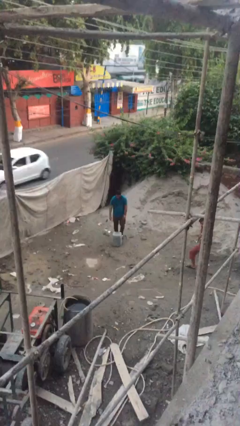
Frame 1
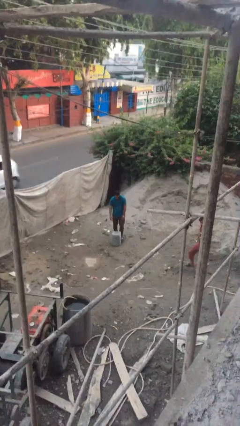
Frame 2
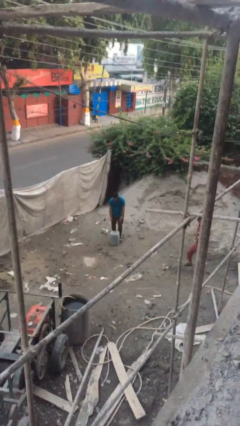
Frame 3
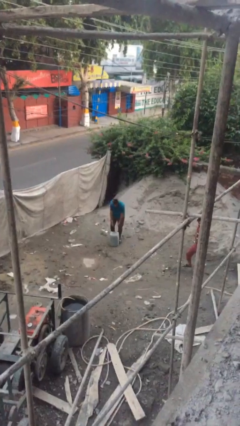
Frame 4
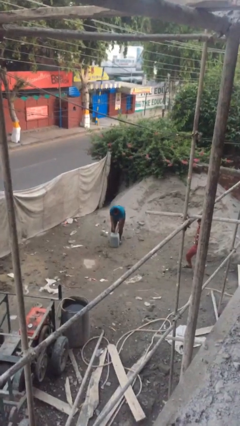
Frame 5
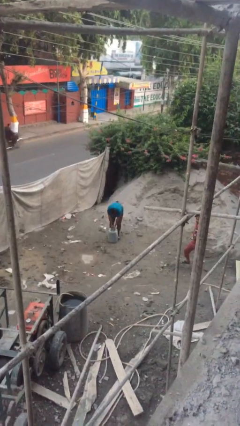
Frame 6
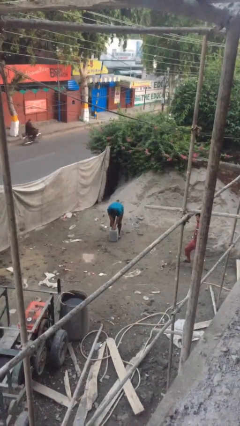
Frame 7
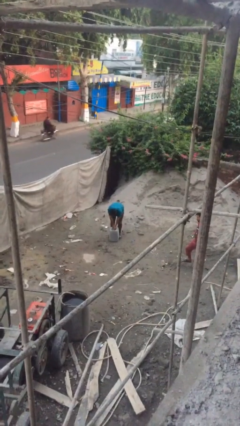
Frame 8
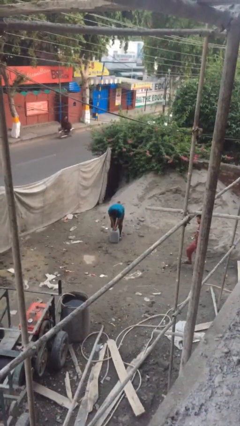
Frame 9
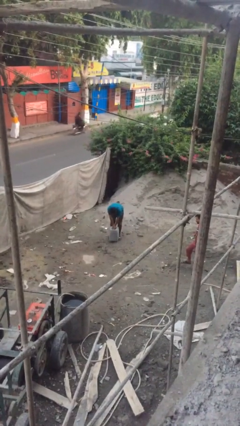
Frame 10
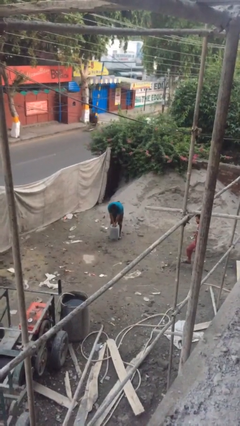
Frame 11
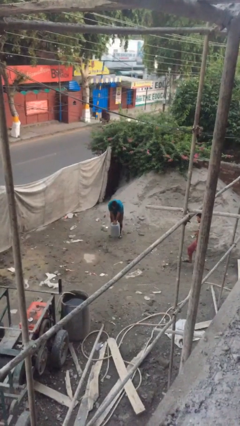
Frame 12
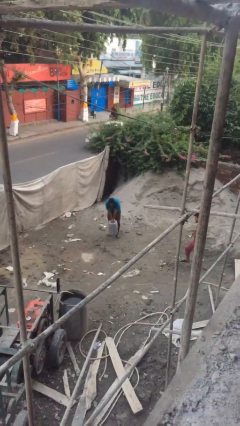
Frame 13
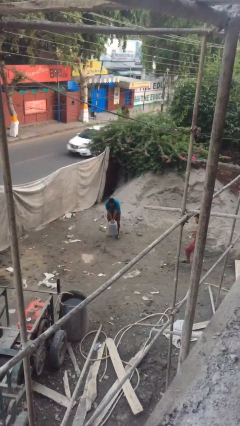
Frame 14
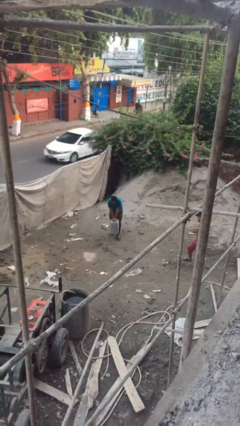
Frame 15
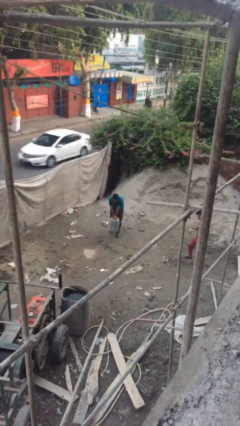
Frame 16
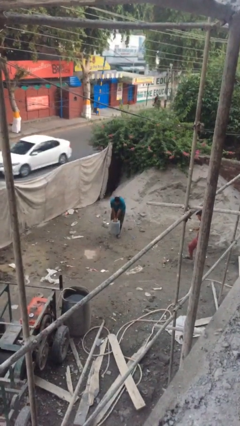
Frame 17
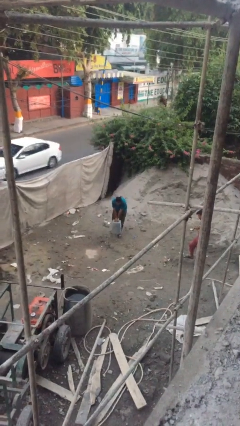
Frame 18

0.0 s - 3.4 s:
person picks up object from floor

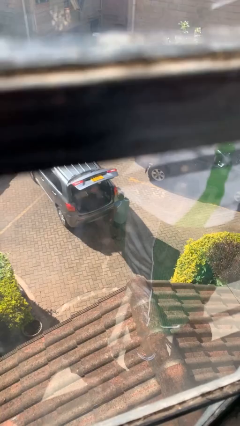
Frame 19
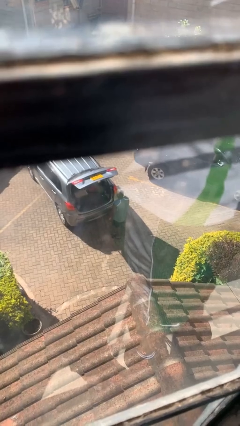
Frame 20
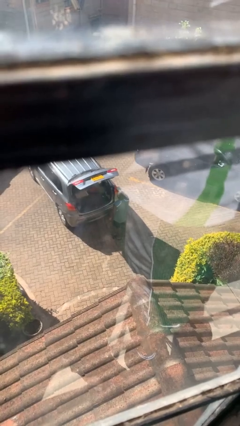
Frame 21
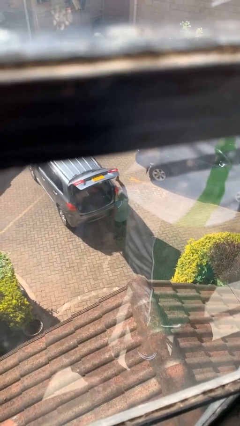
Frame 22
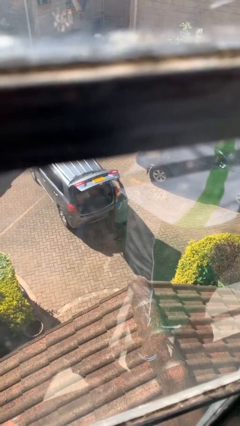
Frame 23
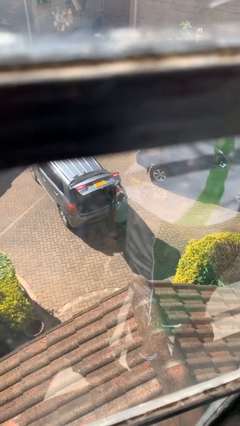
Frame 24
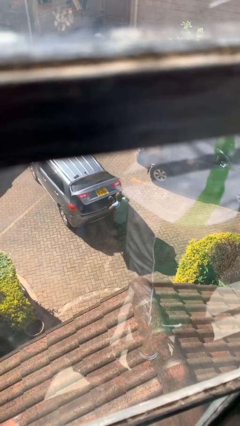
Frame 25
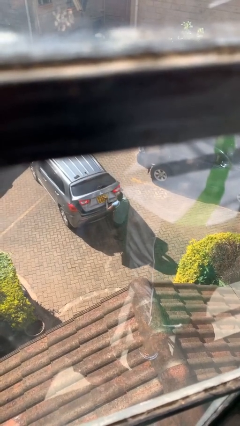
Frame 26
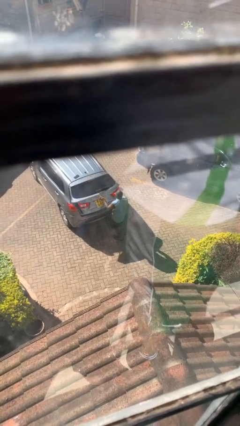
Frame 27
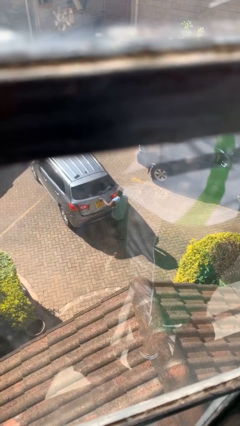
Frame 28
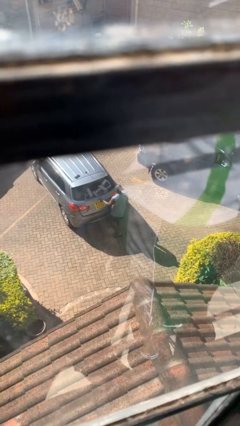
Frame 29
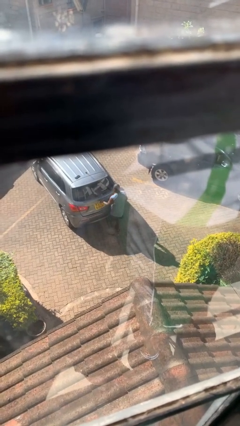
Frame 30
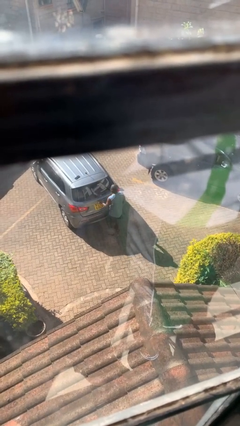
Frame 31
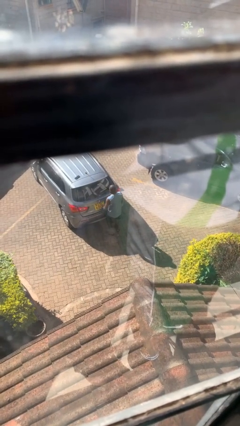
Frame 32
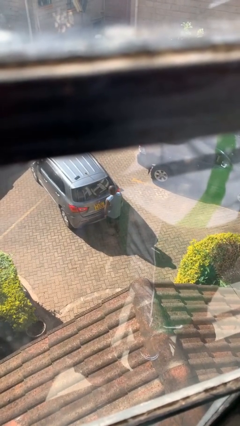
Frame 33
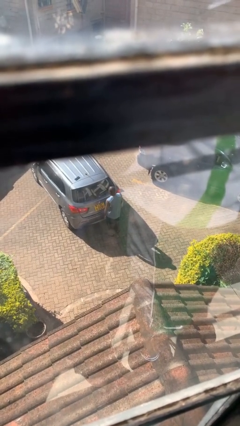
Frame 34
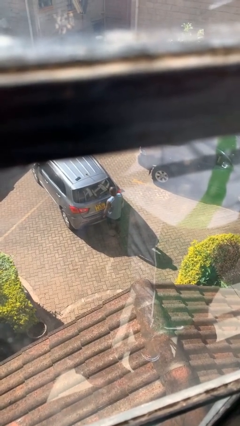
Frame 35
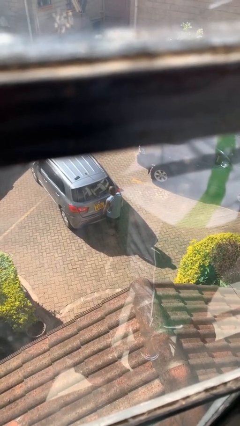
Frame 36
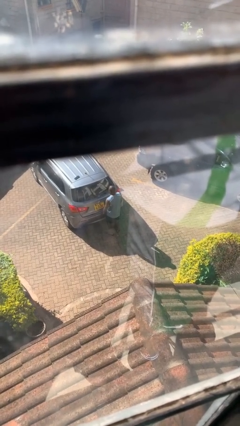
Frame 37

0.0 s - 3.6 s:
person closes car trunk

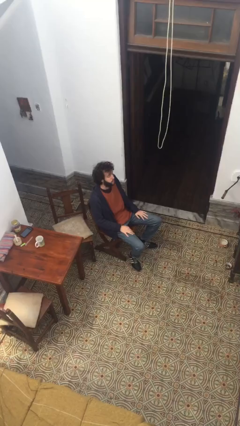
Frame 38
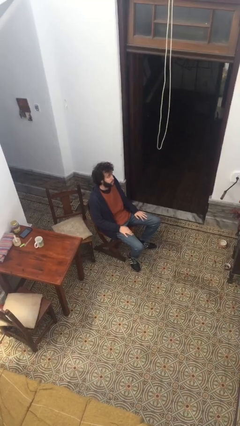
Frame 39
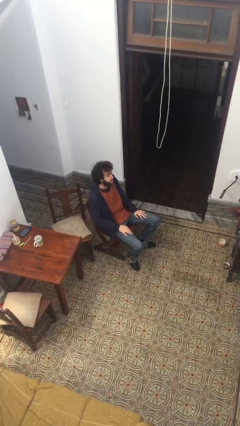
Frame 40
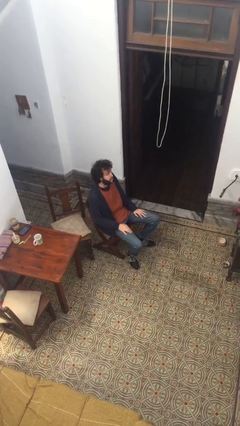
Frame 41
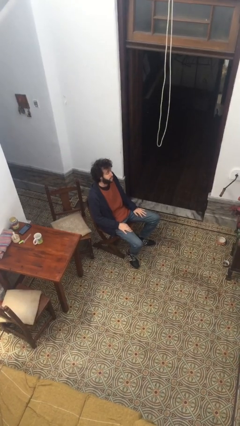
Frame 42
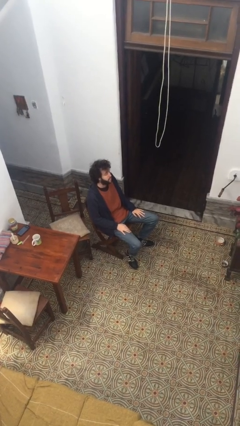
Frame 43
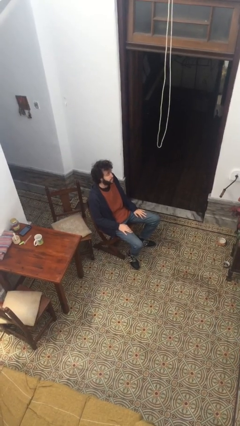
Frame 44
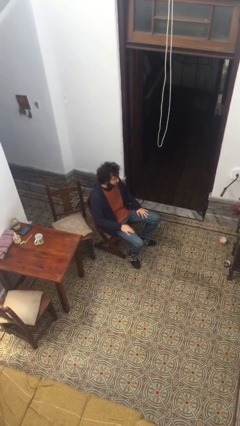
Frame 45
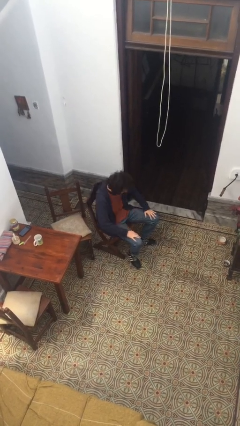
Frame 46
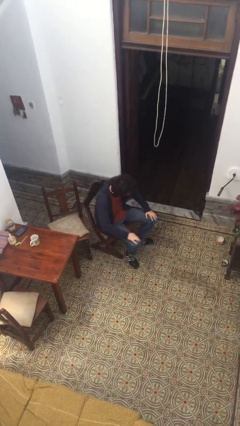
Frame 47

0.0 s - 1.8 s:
person sits down

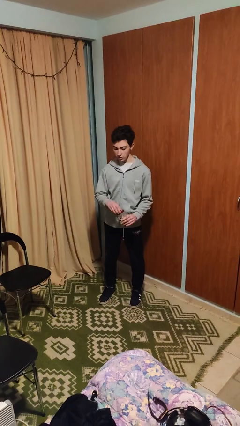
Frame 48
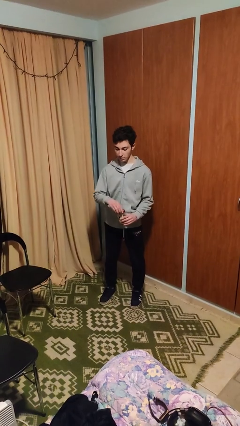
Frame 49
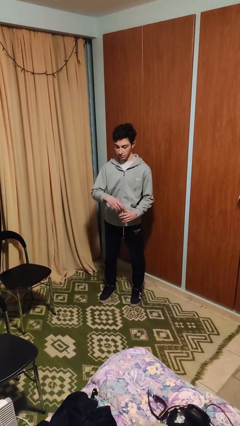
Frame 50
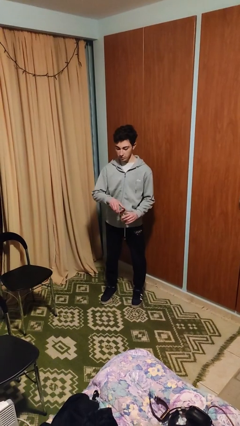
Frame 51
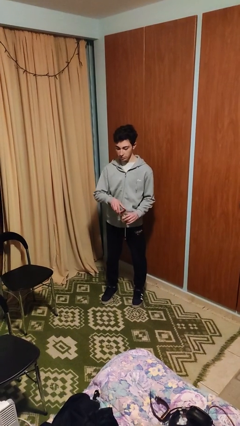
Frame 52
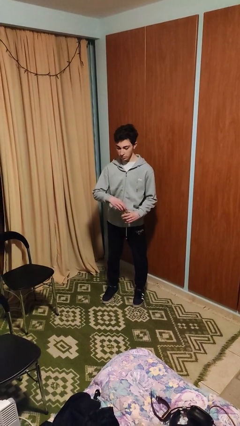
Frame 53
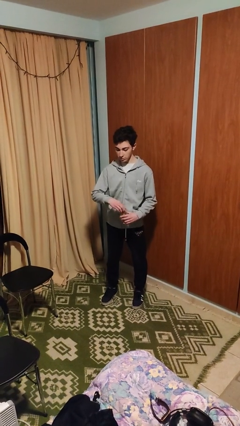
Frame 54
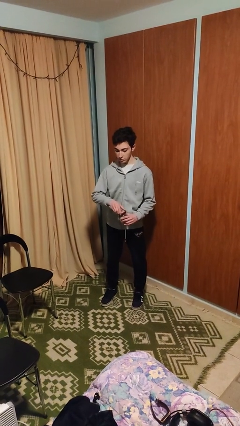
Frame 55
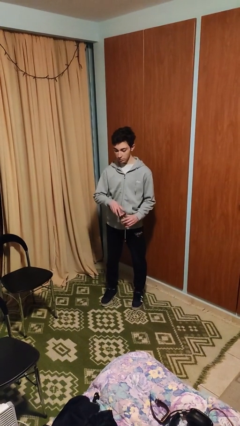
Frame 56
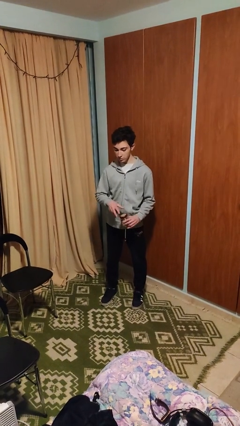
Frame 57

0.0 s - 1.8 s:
person closes jar

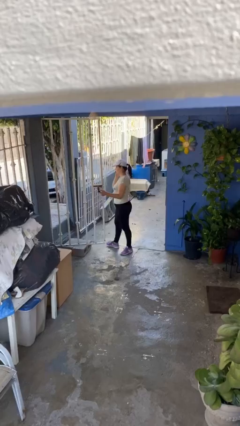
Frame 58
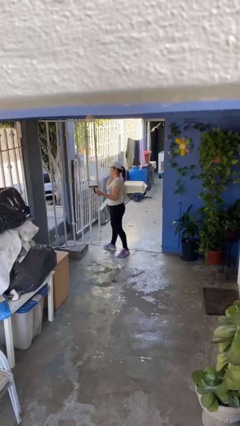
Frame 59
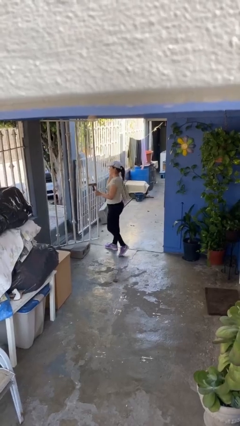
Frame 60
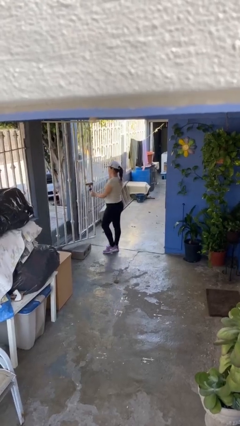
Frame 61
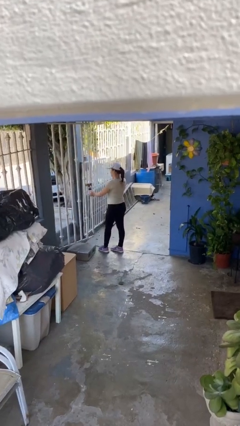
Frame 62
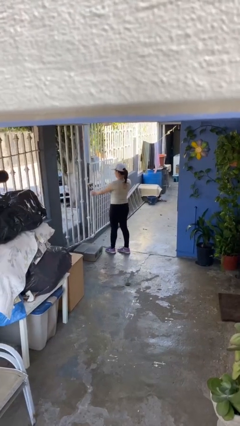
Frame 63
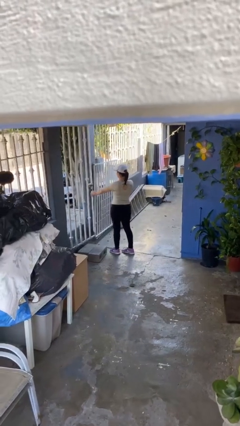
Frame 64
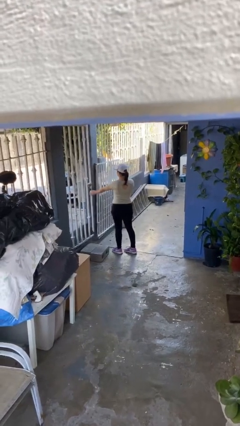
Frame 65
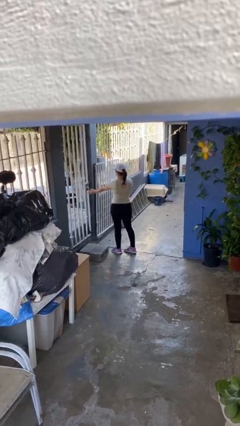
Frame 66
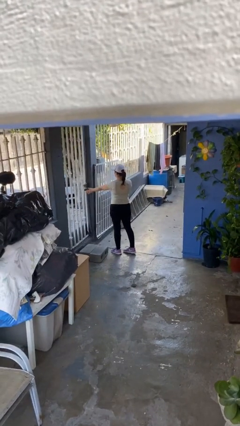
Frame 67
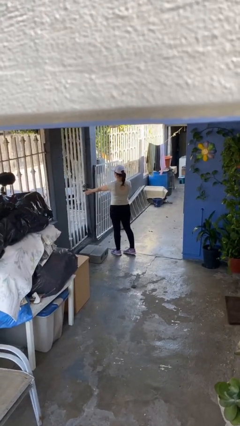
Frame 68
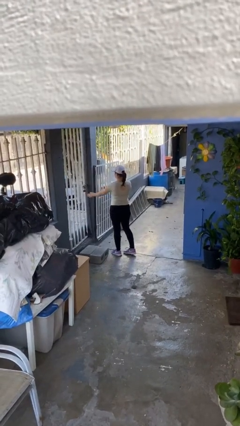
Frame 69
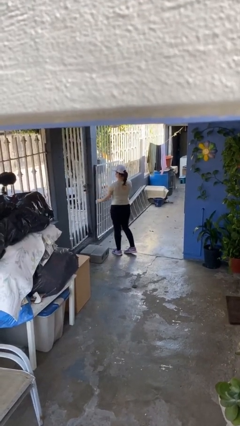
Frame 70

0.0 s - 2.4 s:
person closes facility door

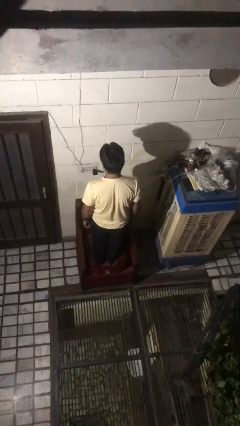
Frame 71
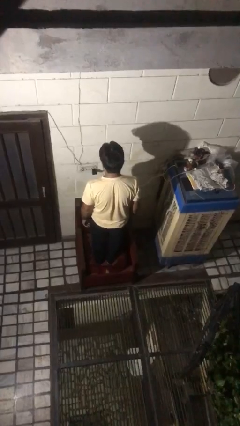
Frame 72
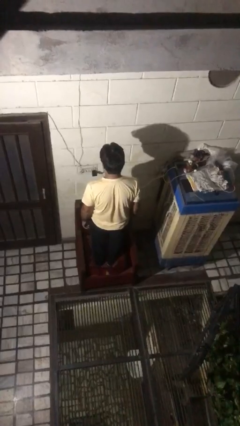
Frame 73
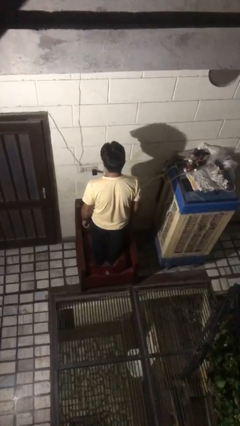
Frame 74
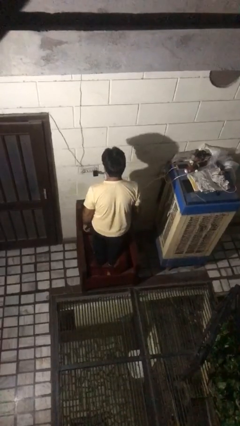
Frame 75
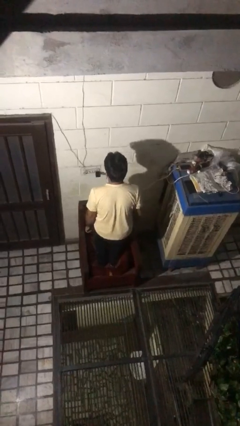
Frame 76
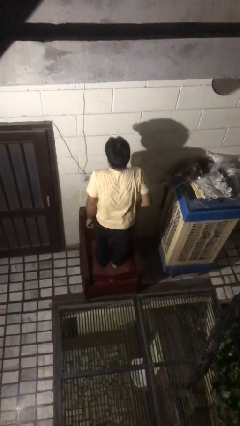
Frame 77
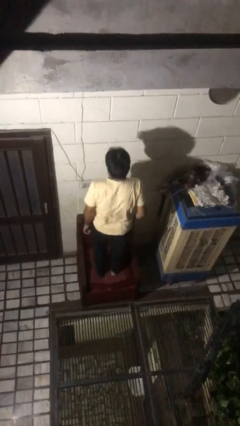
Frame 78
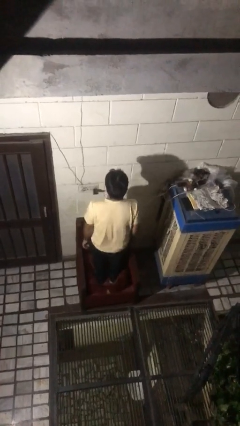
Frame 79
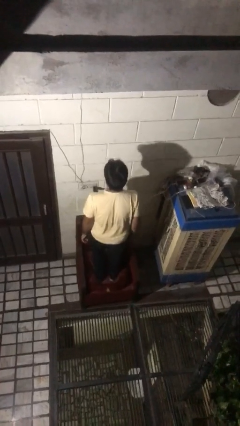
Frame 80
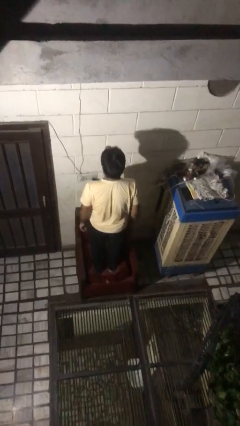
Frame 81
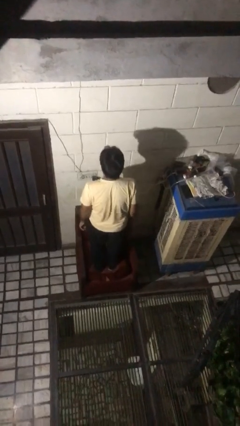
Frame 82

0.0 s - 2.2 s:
person jumps on couch

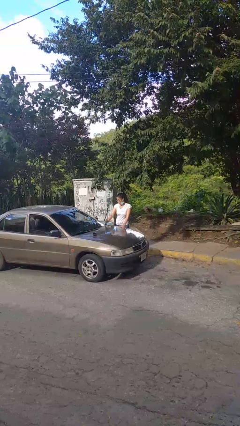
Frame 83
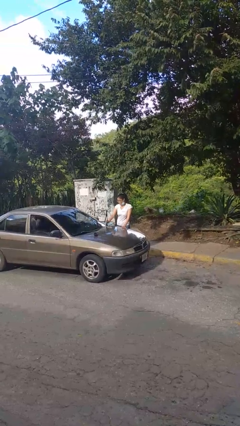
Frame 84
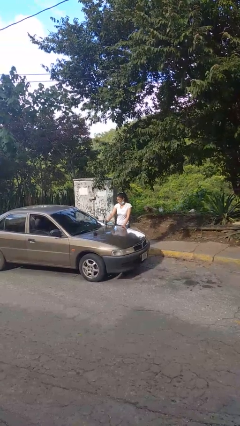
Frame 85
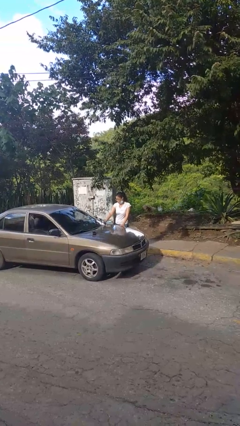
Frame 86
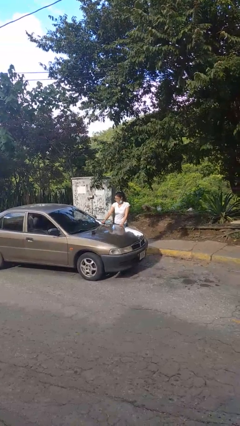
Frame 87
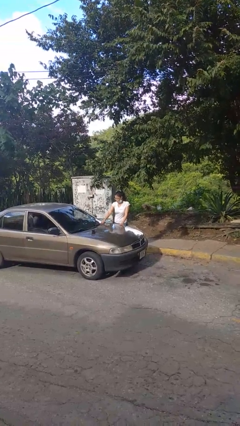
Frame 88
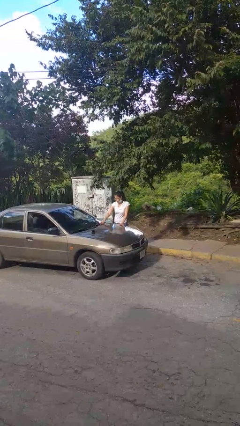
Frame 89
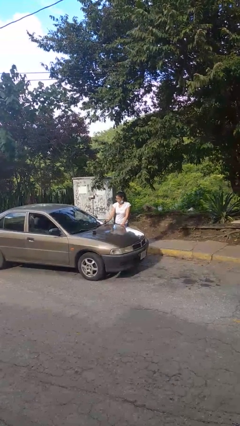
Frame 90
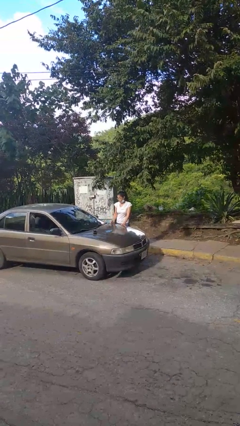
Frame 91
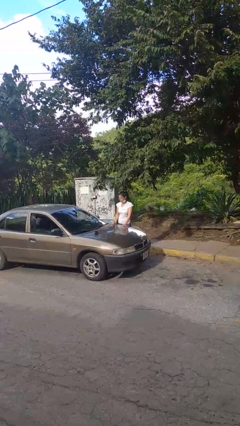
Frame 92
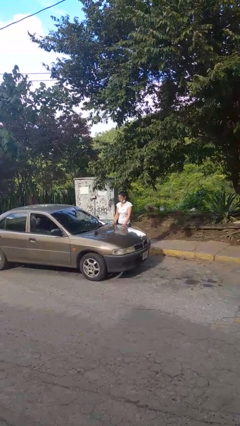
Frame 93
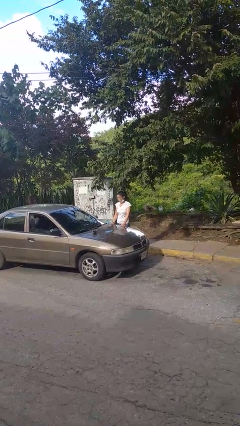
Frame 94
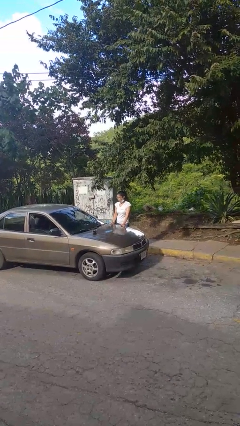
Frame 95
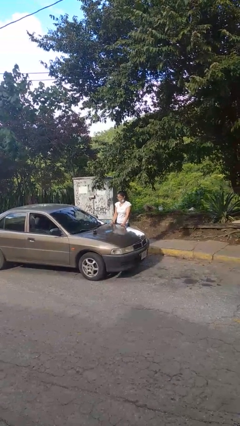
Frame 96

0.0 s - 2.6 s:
person flips down car wipers
